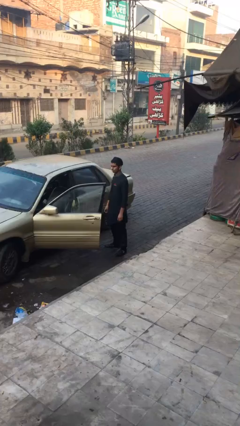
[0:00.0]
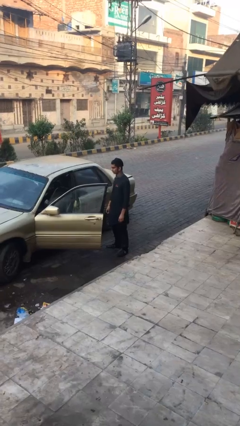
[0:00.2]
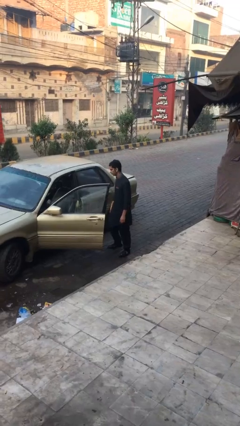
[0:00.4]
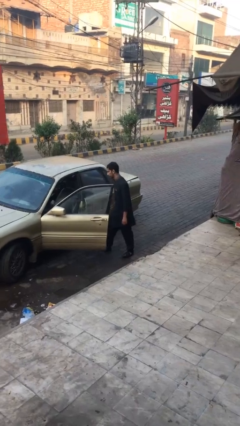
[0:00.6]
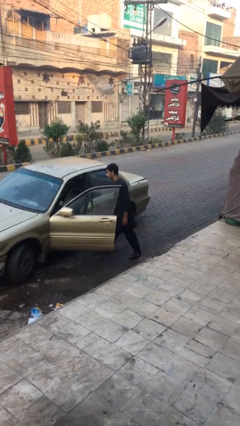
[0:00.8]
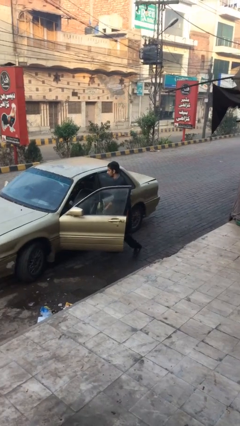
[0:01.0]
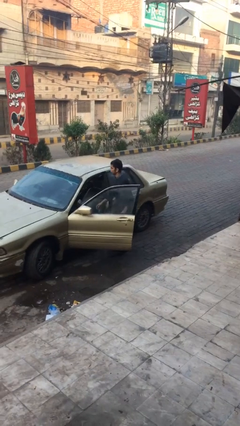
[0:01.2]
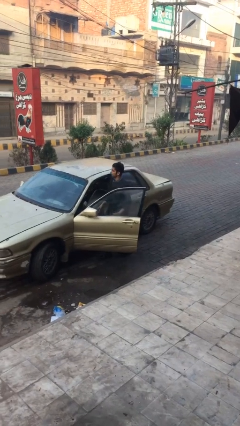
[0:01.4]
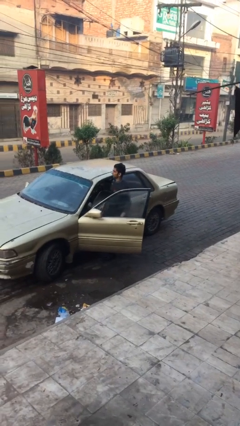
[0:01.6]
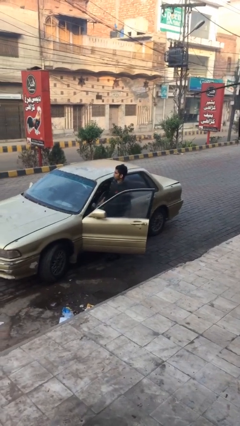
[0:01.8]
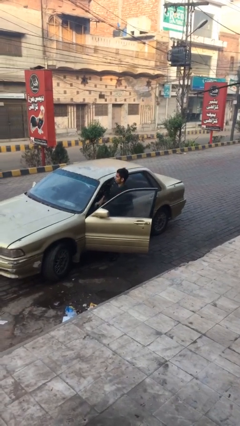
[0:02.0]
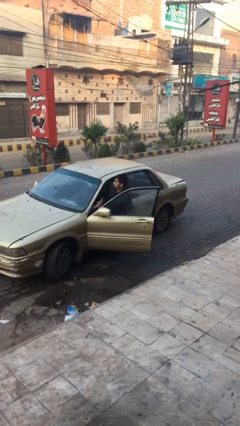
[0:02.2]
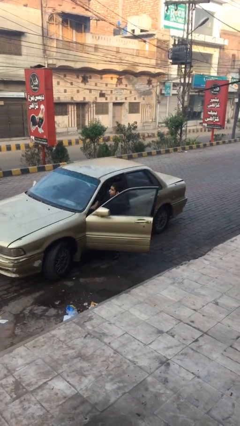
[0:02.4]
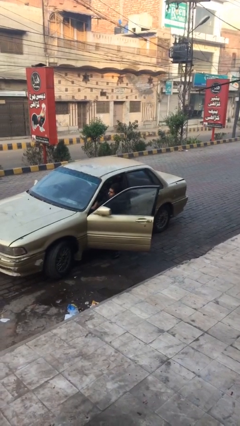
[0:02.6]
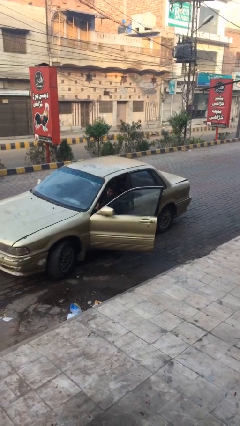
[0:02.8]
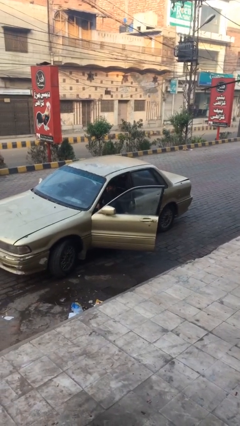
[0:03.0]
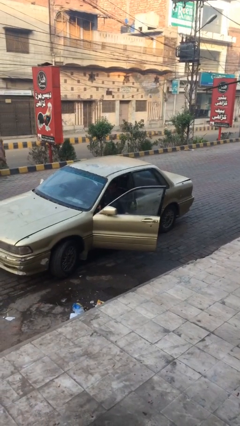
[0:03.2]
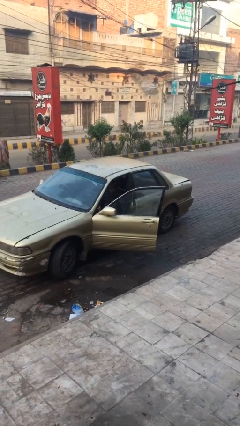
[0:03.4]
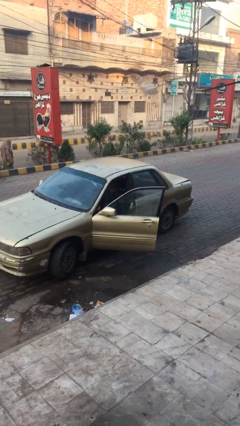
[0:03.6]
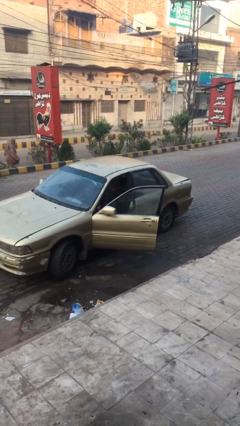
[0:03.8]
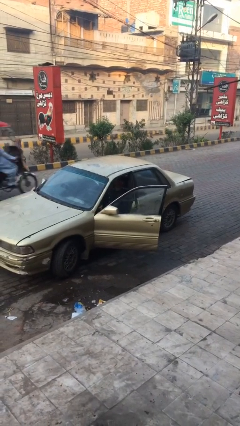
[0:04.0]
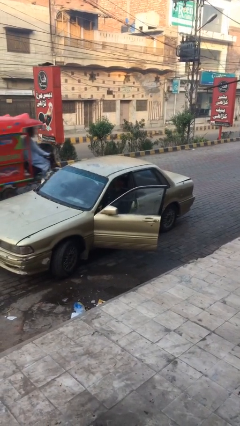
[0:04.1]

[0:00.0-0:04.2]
person enters car

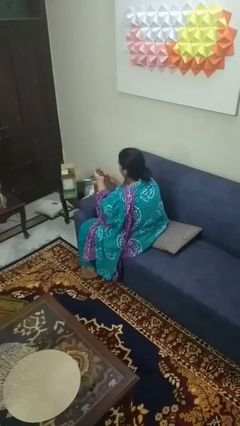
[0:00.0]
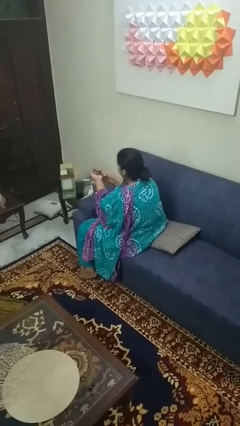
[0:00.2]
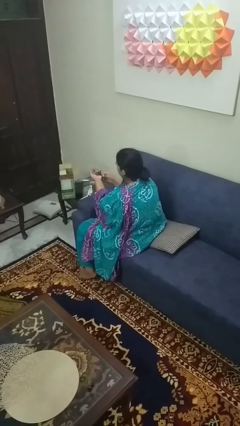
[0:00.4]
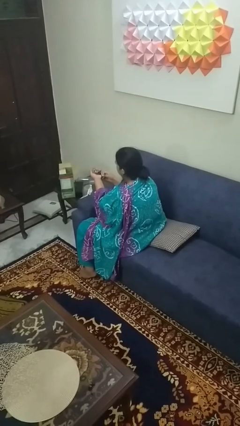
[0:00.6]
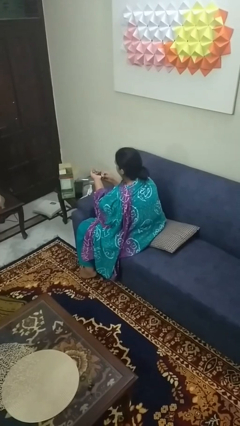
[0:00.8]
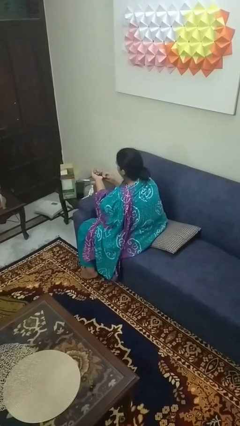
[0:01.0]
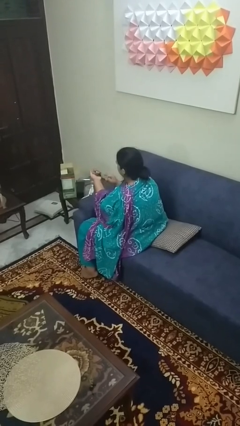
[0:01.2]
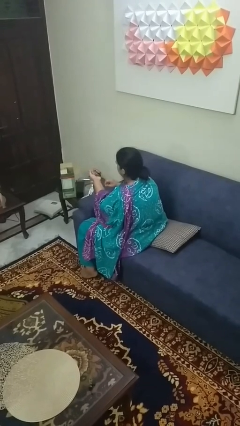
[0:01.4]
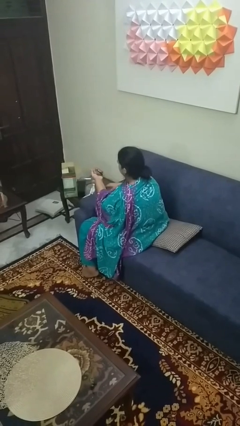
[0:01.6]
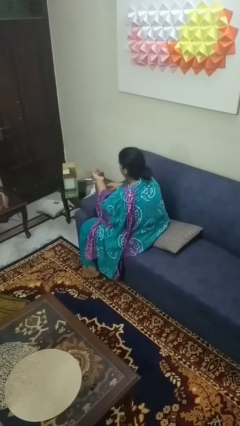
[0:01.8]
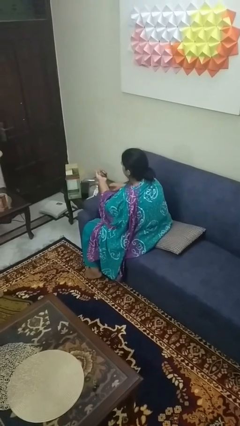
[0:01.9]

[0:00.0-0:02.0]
person clips fingernails

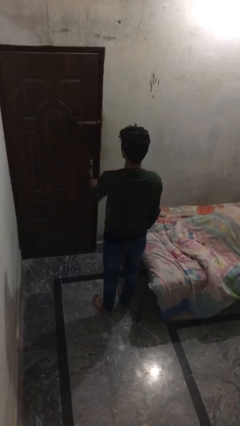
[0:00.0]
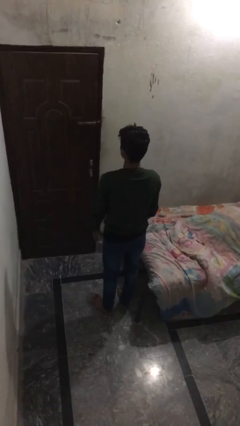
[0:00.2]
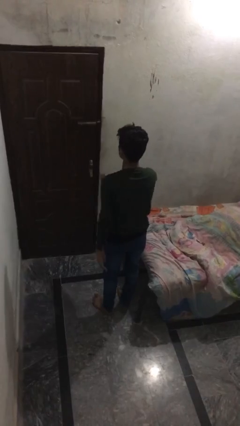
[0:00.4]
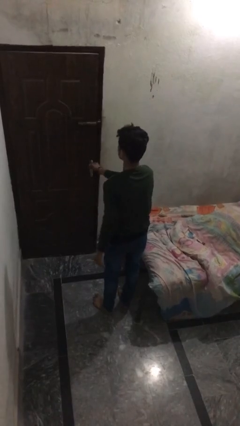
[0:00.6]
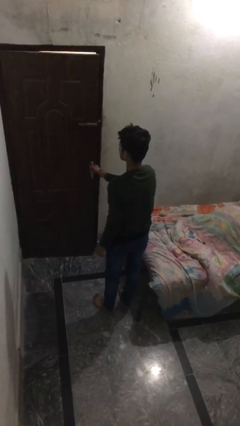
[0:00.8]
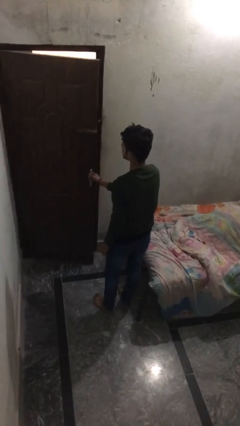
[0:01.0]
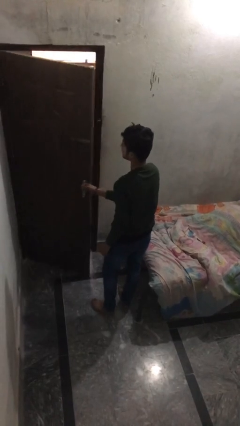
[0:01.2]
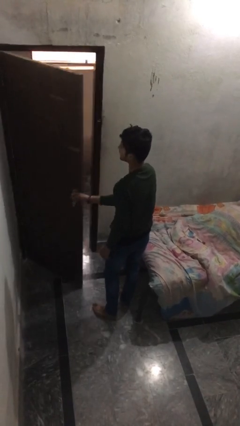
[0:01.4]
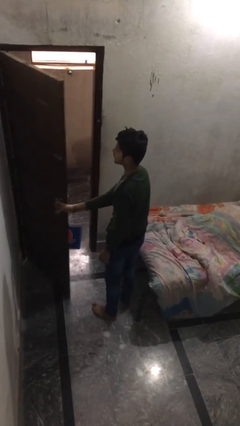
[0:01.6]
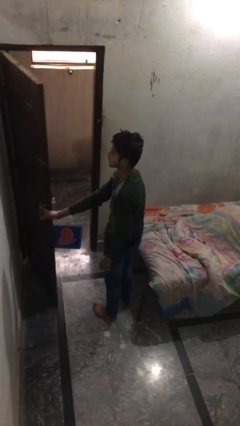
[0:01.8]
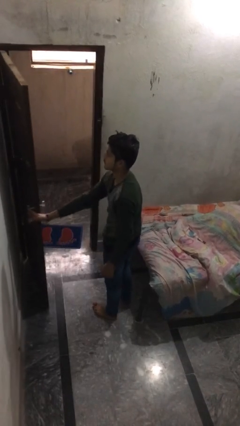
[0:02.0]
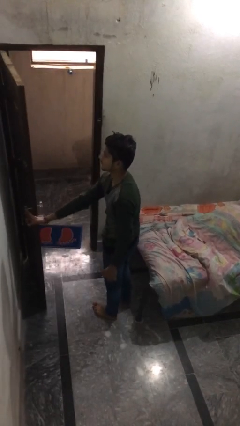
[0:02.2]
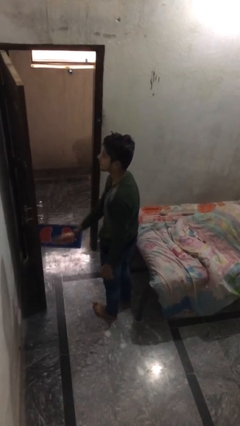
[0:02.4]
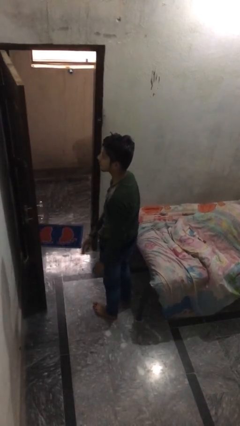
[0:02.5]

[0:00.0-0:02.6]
person opens facility door

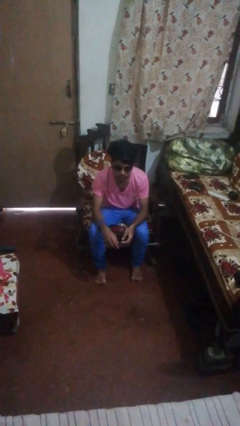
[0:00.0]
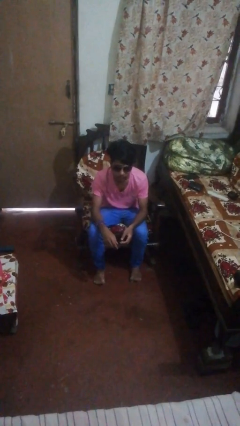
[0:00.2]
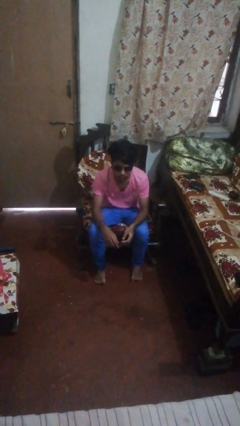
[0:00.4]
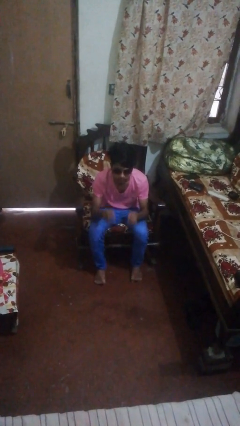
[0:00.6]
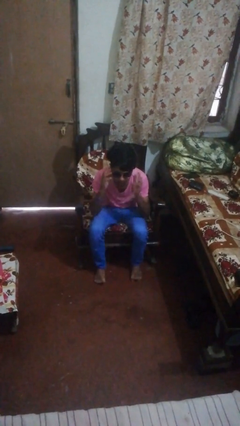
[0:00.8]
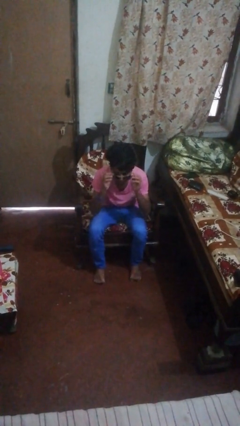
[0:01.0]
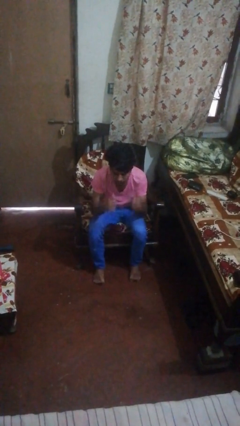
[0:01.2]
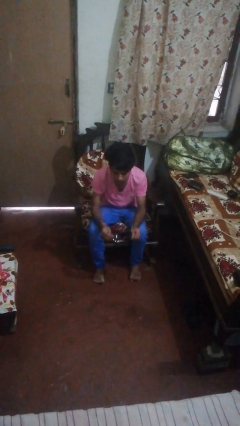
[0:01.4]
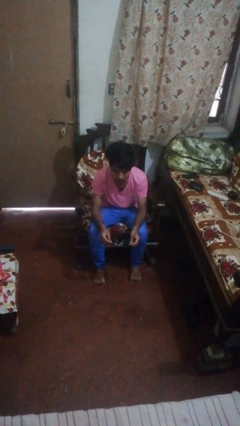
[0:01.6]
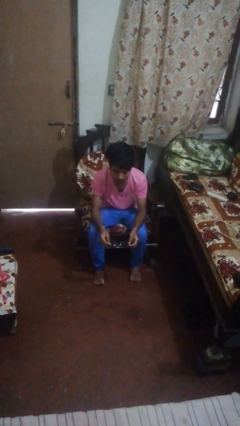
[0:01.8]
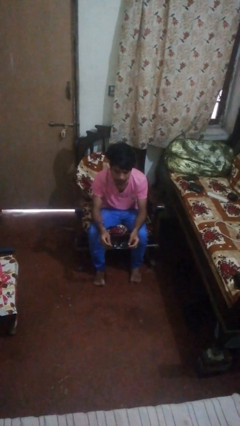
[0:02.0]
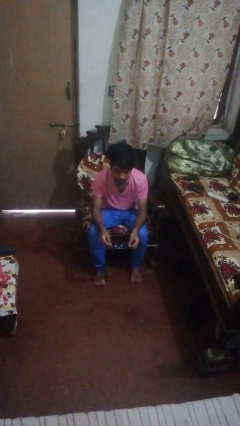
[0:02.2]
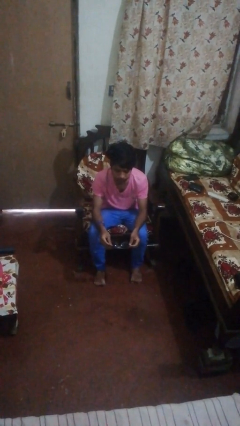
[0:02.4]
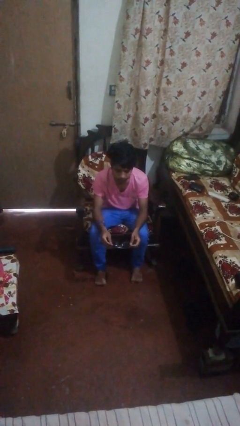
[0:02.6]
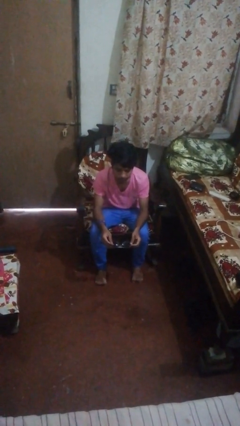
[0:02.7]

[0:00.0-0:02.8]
person takes off sunglasses

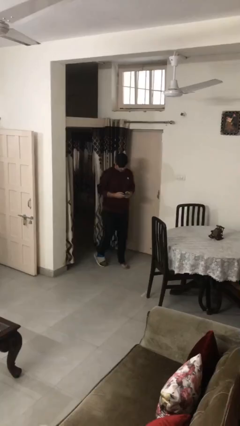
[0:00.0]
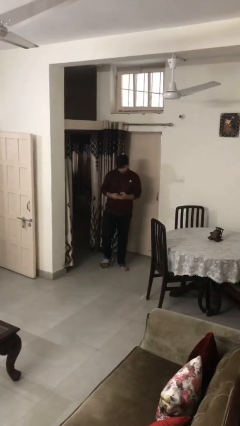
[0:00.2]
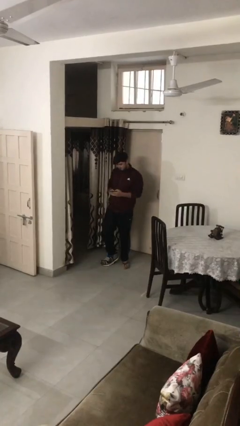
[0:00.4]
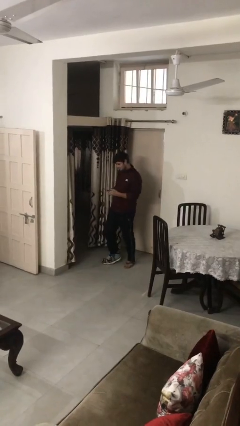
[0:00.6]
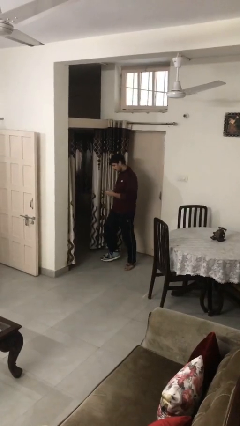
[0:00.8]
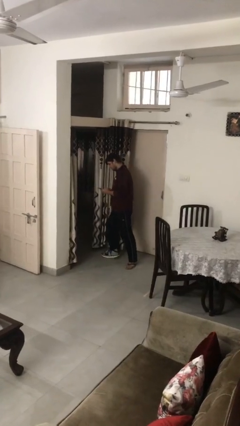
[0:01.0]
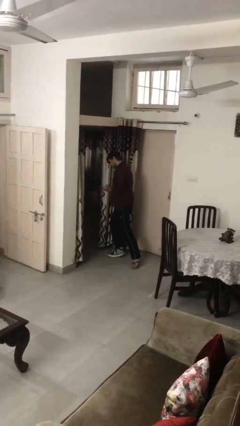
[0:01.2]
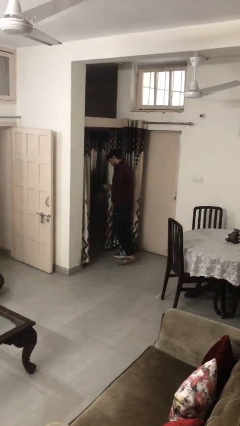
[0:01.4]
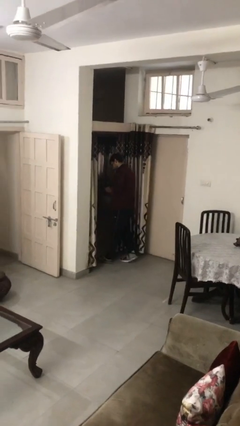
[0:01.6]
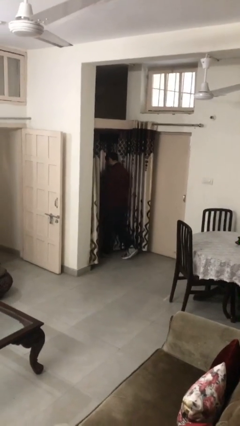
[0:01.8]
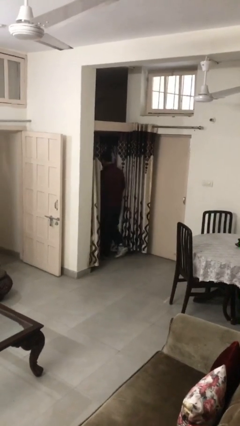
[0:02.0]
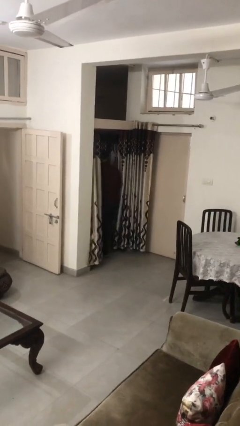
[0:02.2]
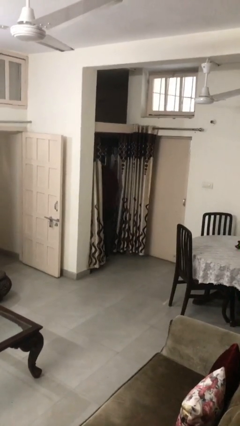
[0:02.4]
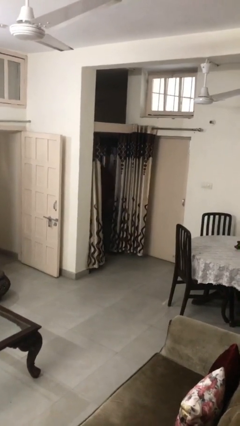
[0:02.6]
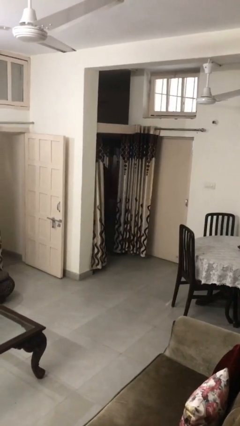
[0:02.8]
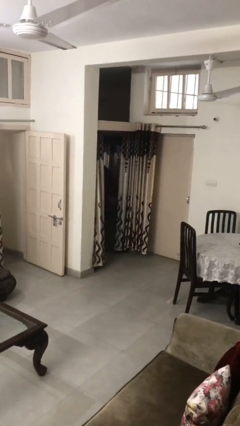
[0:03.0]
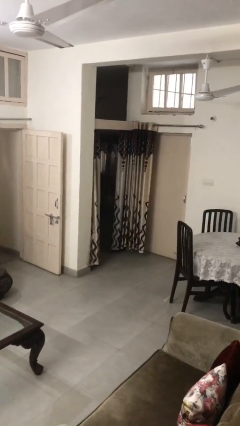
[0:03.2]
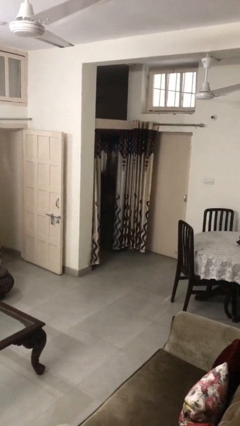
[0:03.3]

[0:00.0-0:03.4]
person exits scene through structure

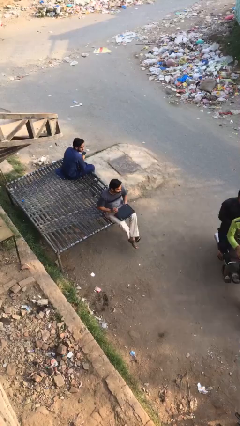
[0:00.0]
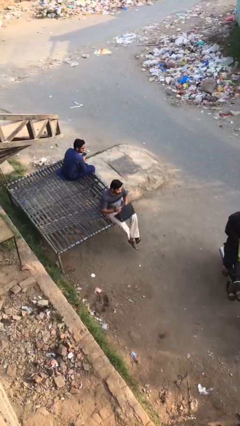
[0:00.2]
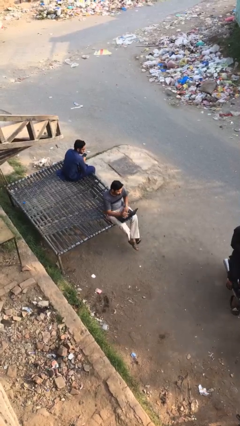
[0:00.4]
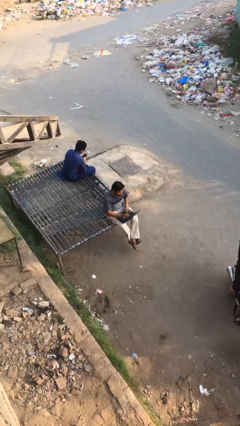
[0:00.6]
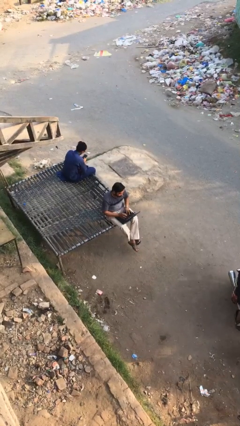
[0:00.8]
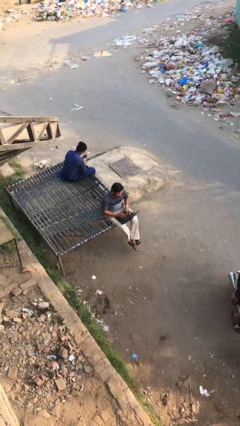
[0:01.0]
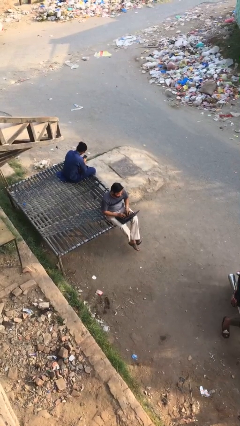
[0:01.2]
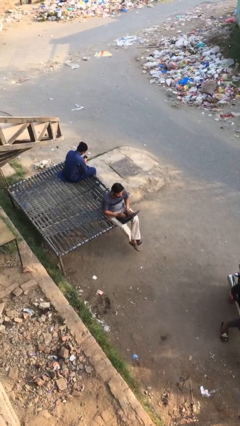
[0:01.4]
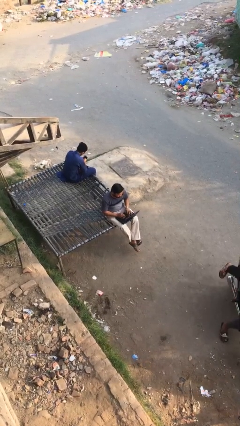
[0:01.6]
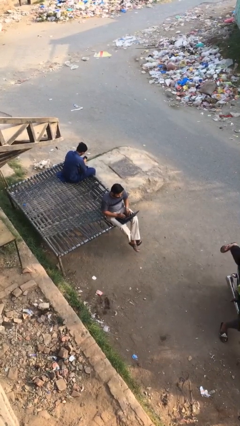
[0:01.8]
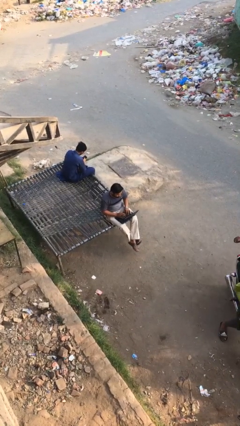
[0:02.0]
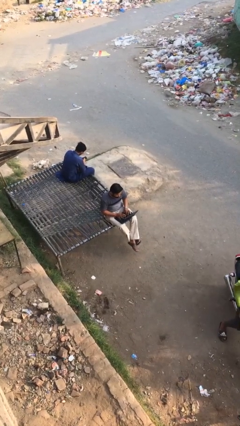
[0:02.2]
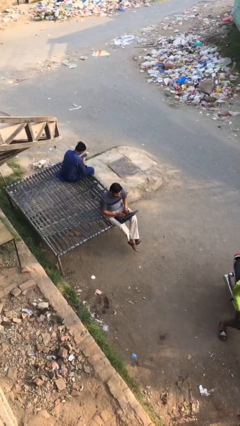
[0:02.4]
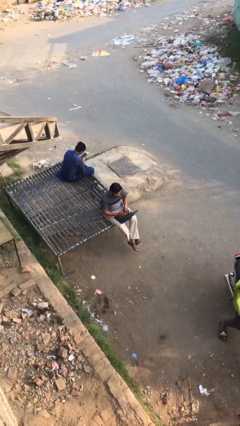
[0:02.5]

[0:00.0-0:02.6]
person interacts with laptop
